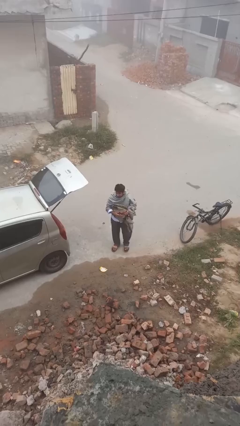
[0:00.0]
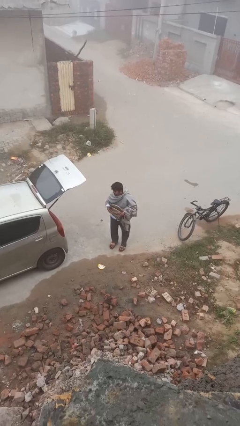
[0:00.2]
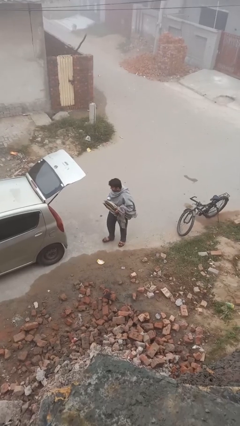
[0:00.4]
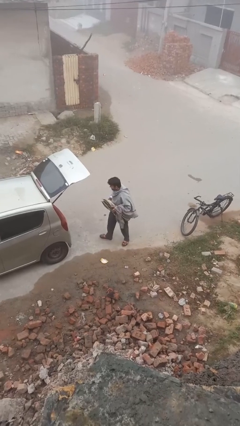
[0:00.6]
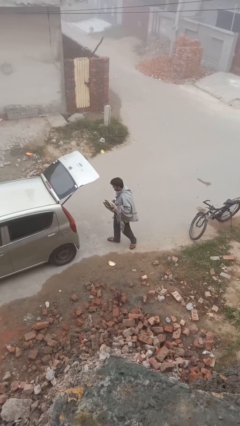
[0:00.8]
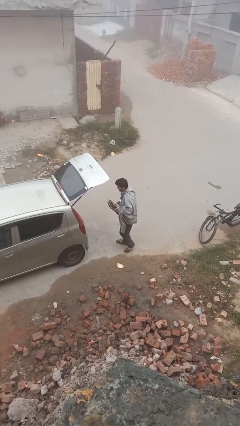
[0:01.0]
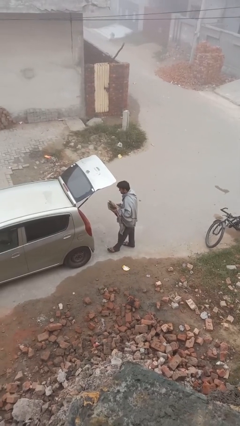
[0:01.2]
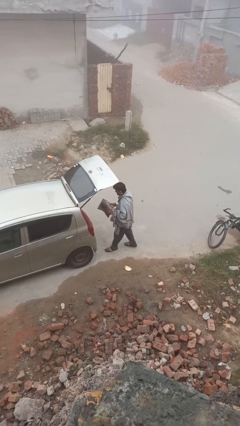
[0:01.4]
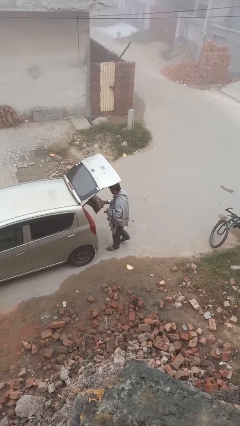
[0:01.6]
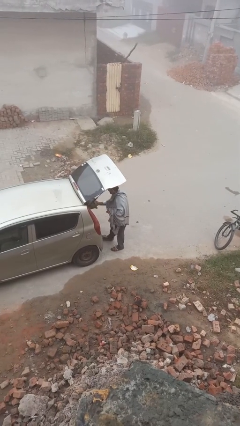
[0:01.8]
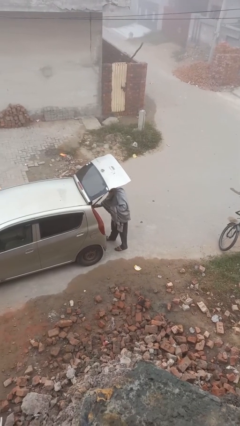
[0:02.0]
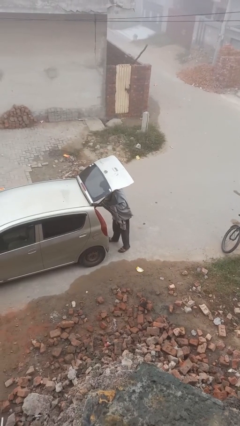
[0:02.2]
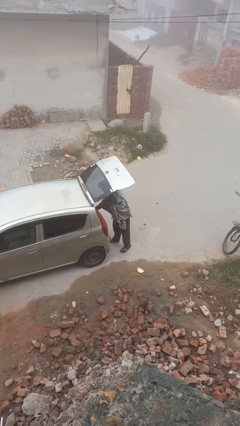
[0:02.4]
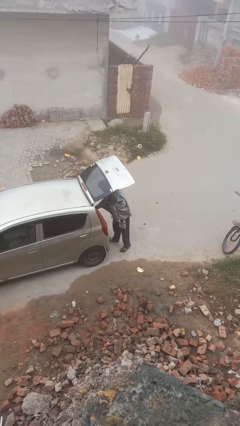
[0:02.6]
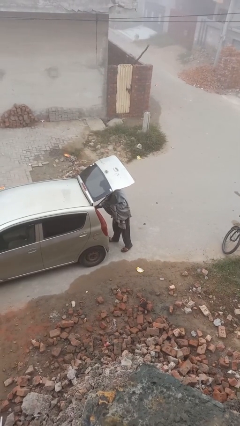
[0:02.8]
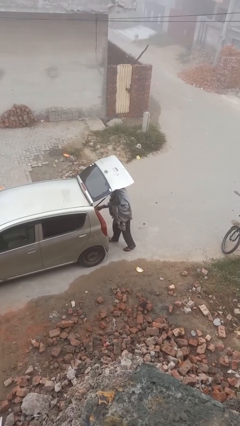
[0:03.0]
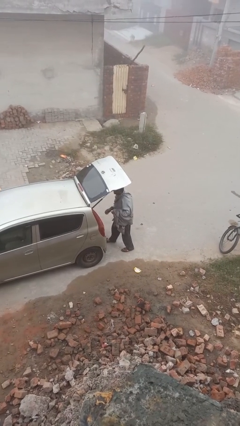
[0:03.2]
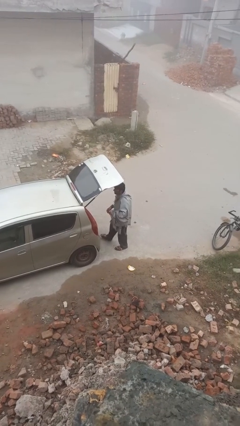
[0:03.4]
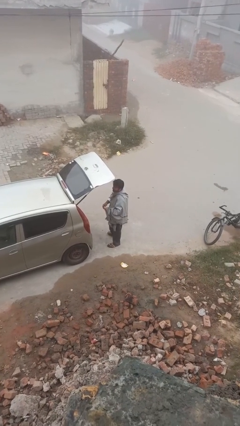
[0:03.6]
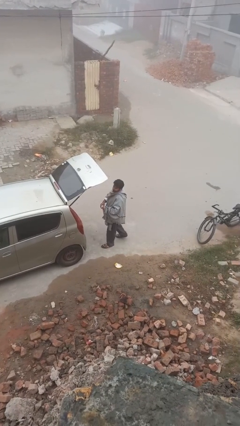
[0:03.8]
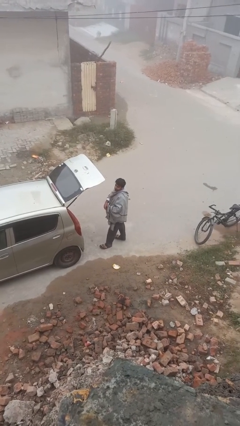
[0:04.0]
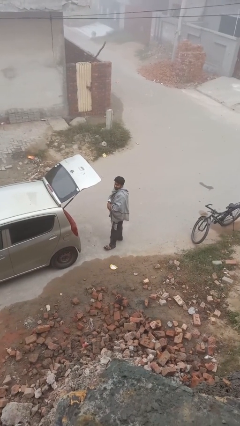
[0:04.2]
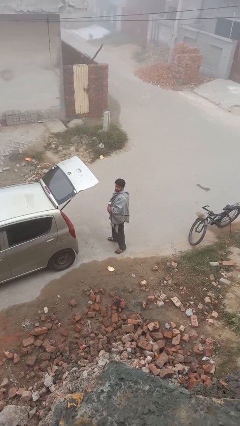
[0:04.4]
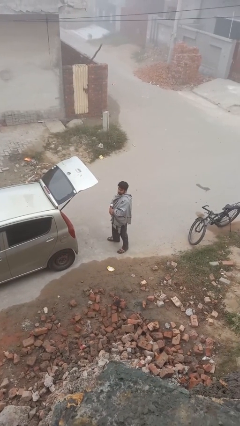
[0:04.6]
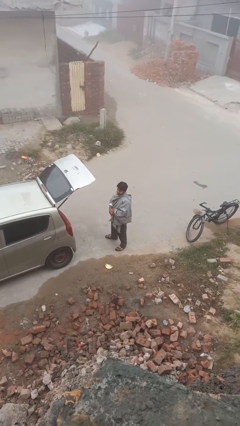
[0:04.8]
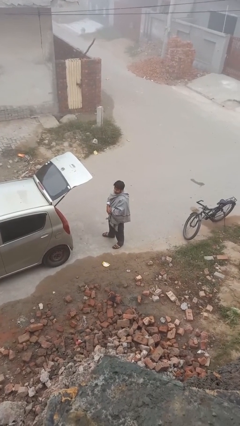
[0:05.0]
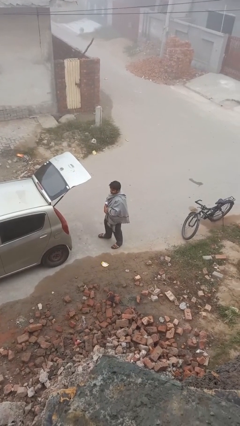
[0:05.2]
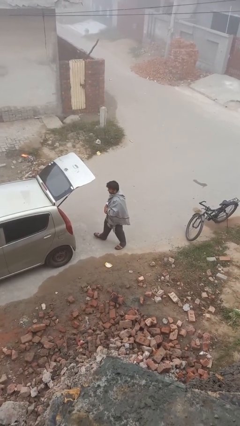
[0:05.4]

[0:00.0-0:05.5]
person loads car

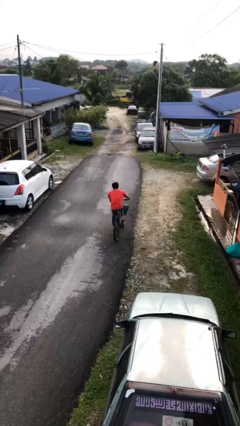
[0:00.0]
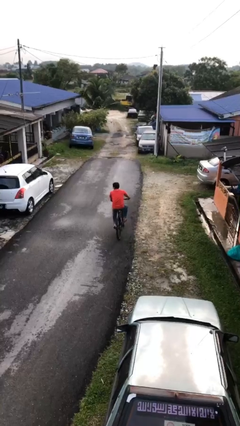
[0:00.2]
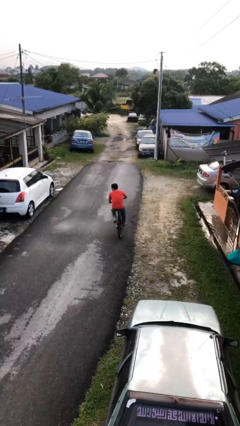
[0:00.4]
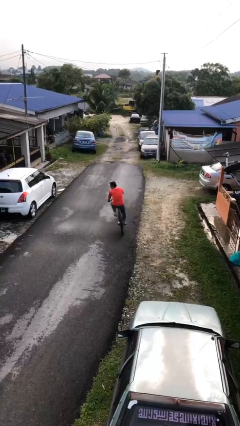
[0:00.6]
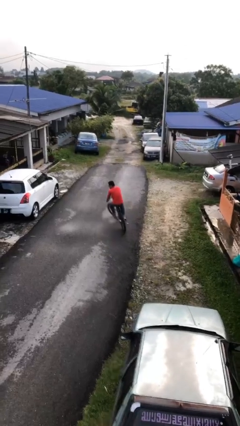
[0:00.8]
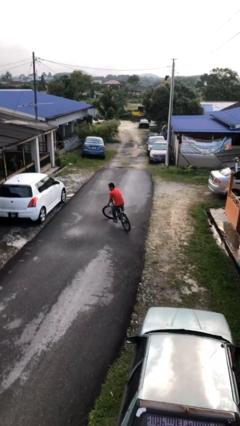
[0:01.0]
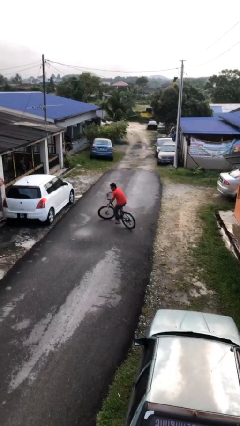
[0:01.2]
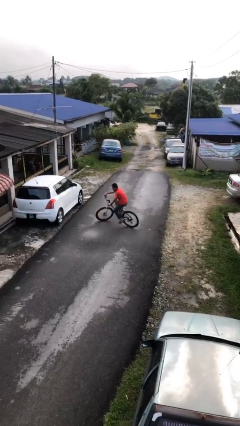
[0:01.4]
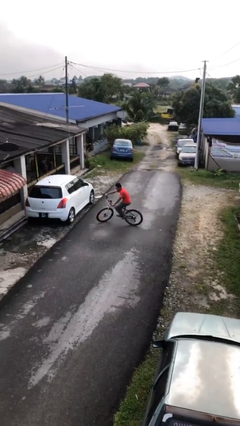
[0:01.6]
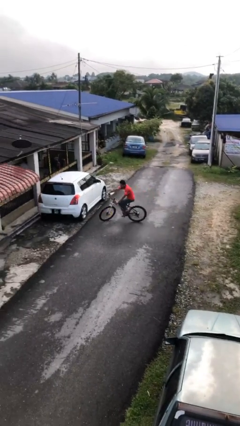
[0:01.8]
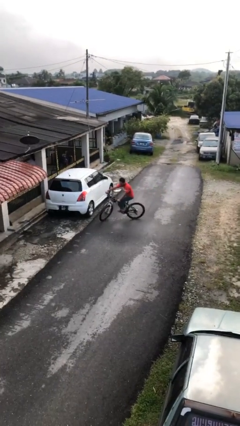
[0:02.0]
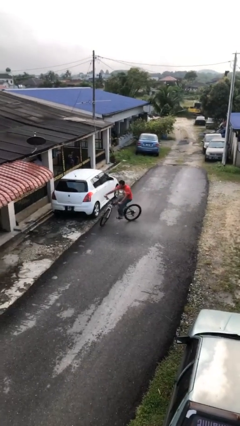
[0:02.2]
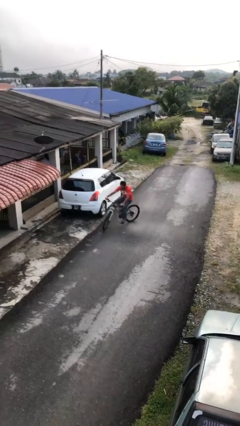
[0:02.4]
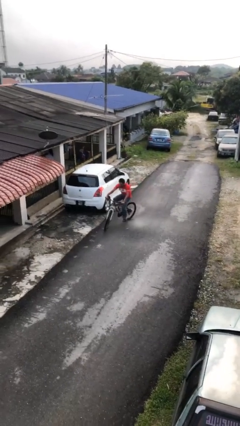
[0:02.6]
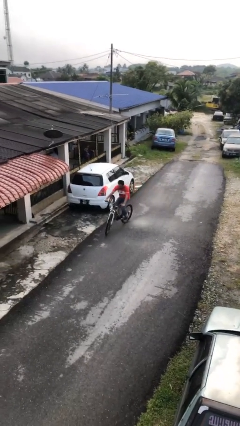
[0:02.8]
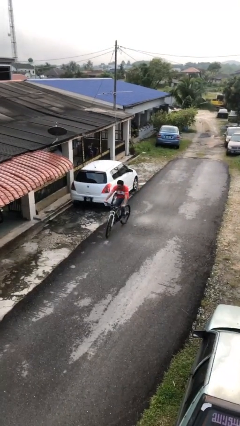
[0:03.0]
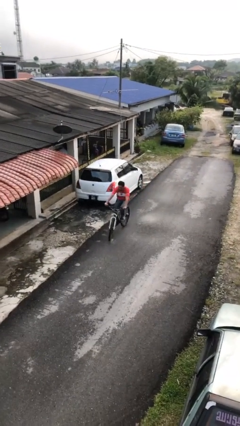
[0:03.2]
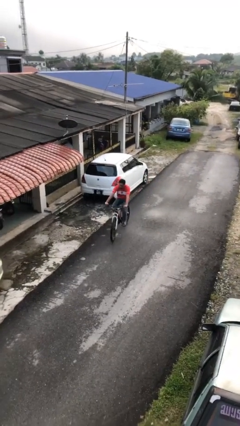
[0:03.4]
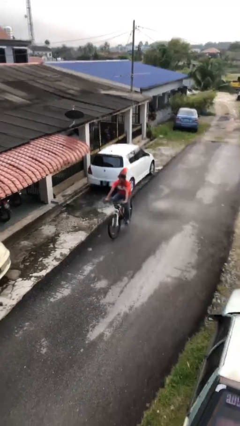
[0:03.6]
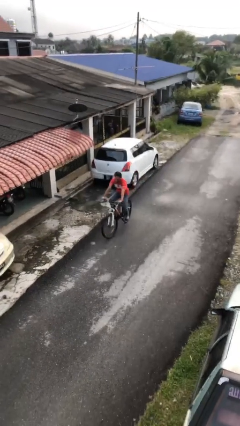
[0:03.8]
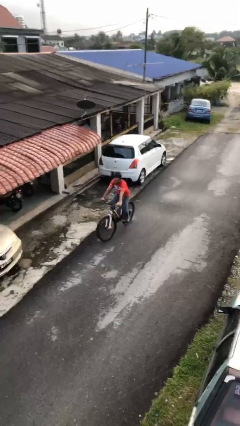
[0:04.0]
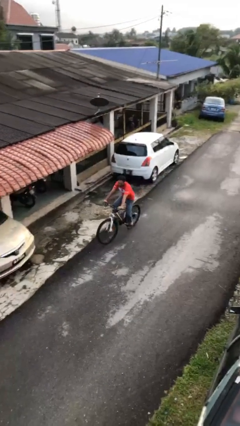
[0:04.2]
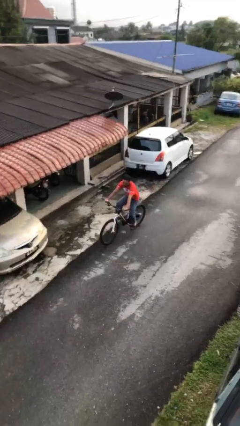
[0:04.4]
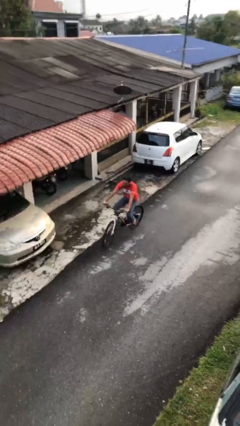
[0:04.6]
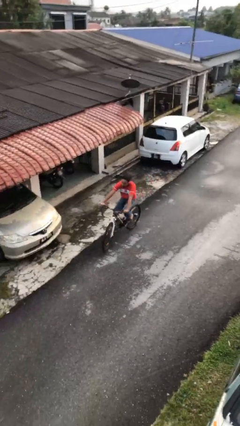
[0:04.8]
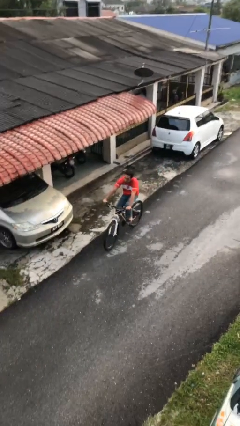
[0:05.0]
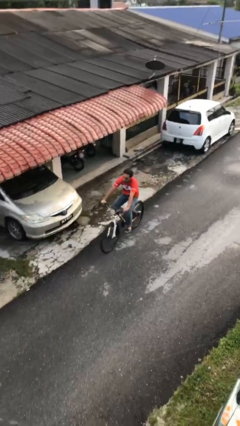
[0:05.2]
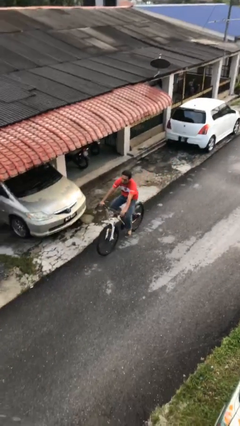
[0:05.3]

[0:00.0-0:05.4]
person rides bicycle

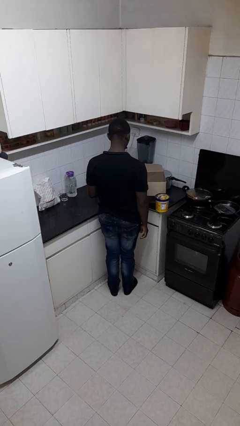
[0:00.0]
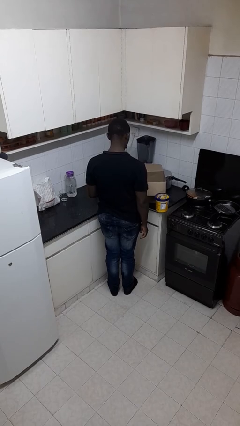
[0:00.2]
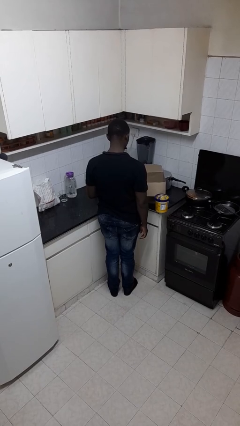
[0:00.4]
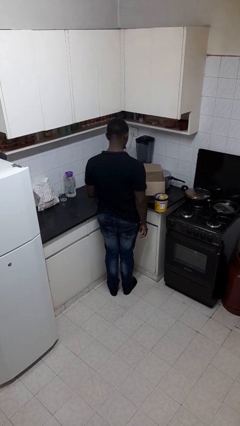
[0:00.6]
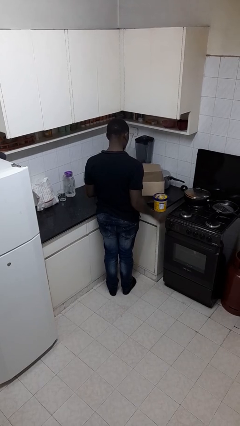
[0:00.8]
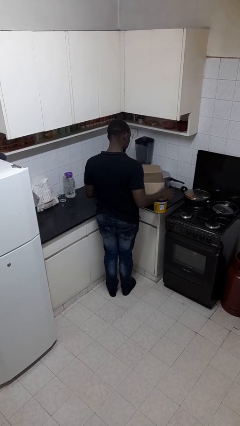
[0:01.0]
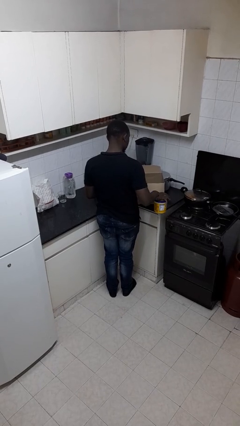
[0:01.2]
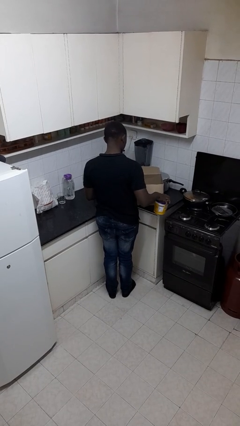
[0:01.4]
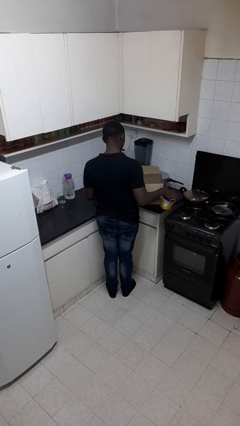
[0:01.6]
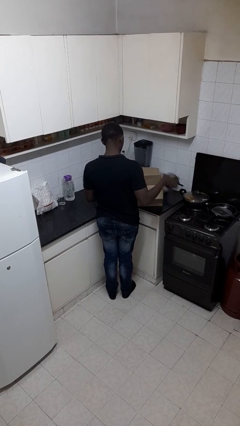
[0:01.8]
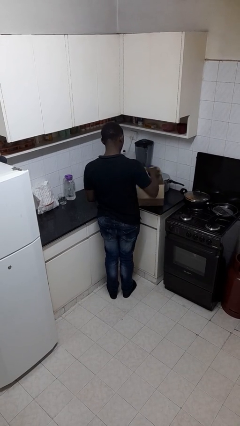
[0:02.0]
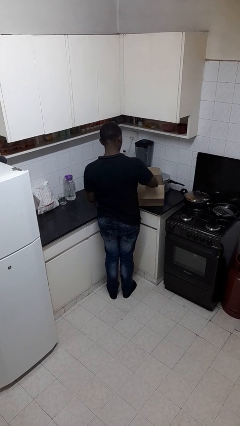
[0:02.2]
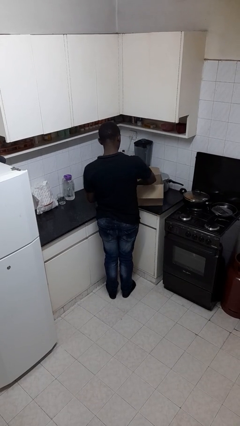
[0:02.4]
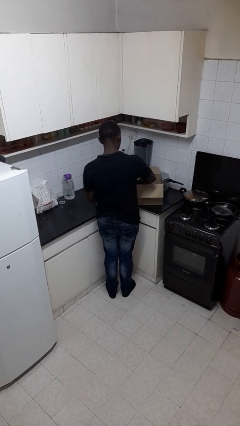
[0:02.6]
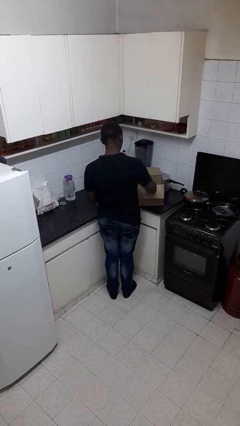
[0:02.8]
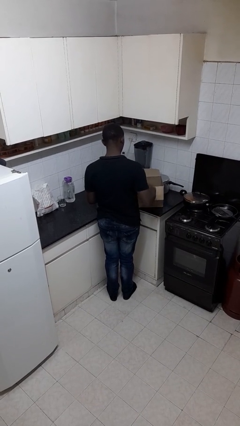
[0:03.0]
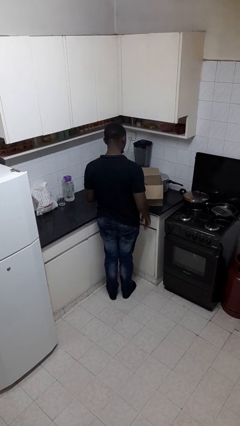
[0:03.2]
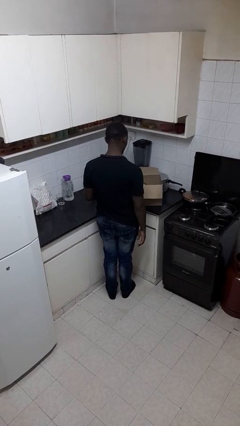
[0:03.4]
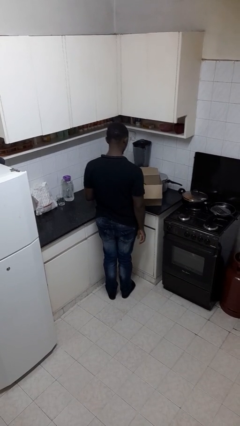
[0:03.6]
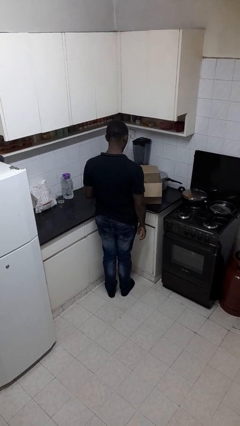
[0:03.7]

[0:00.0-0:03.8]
person puts object into box

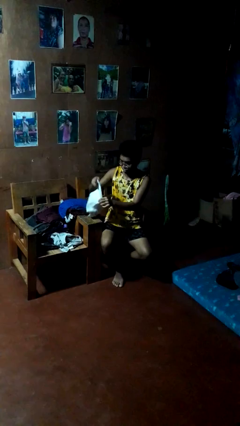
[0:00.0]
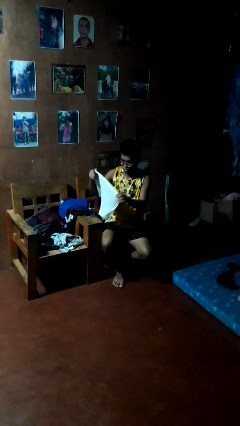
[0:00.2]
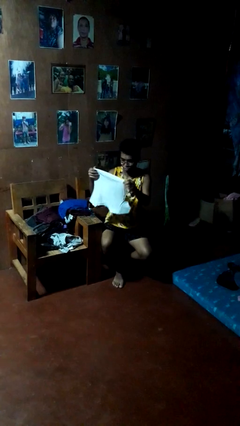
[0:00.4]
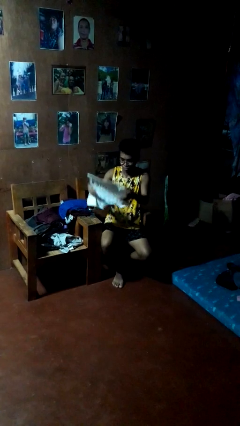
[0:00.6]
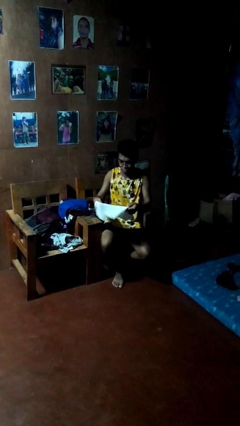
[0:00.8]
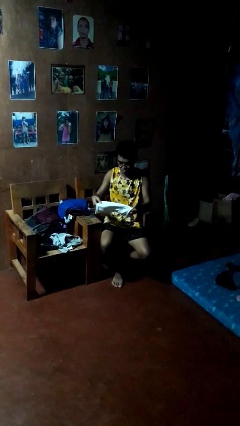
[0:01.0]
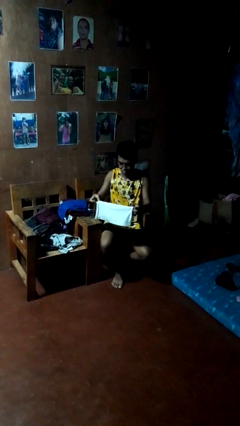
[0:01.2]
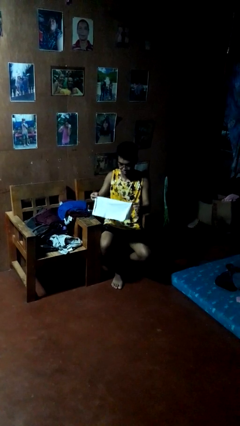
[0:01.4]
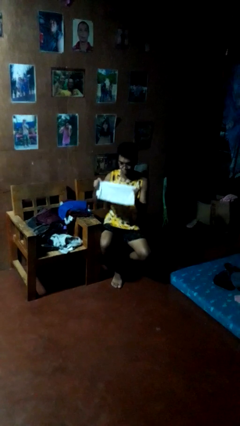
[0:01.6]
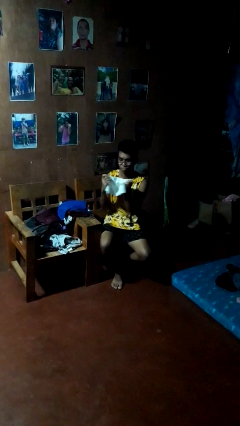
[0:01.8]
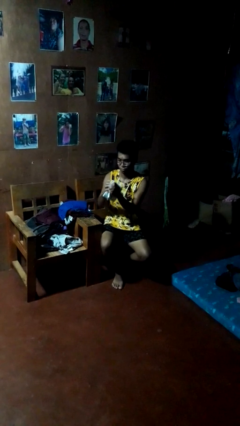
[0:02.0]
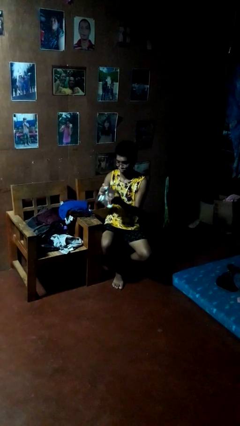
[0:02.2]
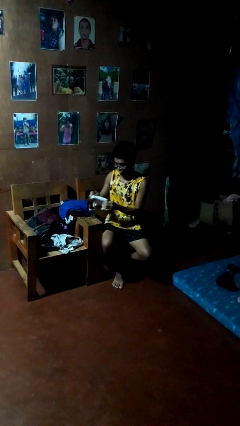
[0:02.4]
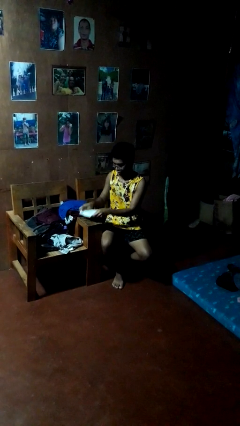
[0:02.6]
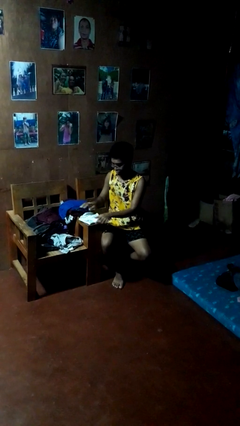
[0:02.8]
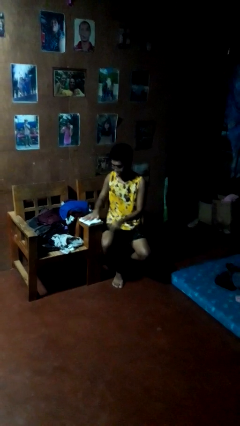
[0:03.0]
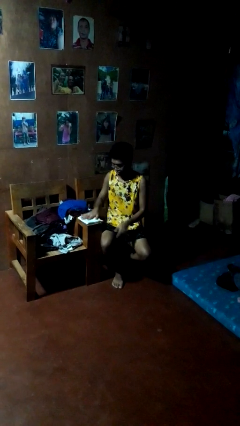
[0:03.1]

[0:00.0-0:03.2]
person folds shirt
